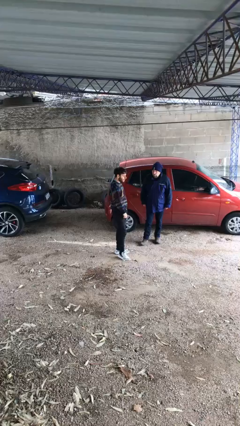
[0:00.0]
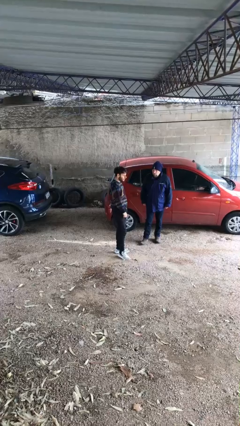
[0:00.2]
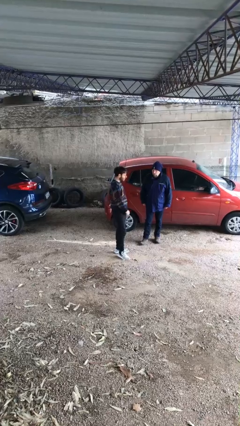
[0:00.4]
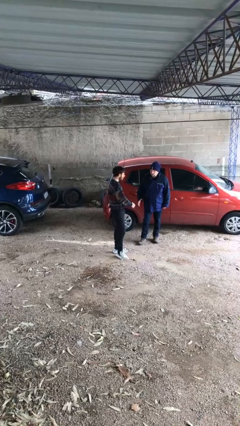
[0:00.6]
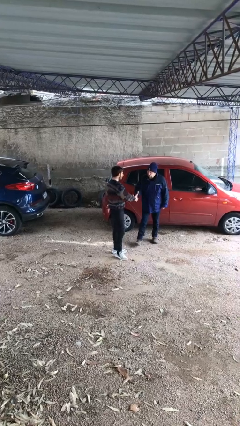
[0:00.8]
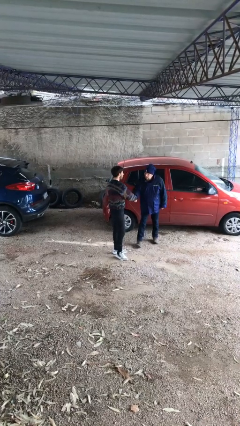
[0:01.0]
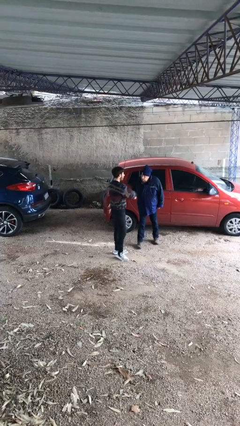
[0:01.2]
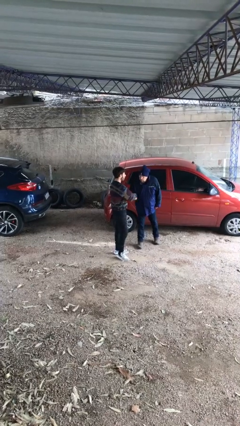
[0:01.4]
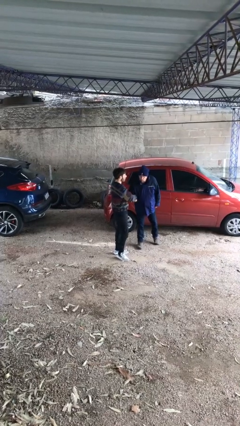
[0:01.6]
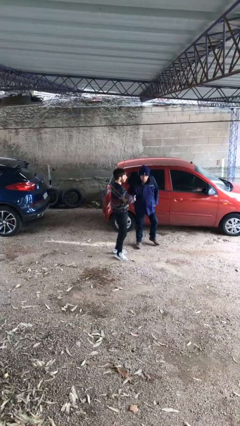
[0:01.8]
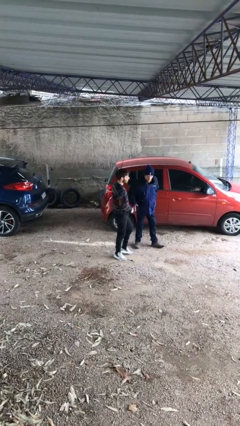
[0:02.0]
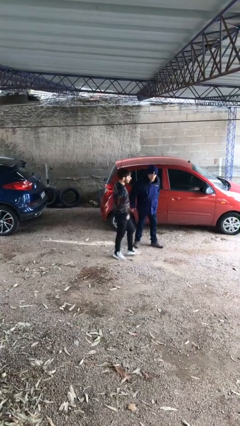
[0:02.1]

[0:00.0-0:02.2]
person shakes hand

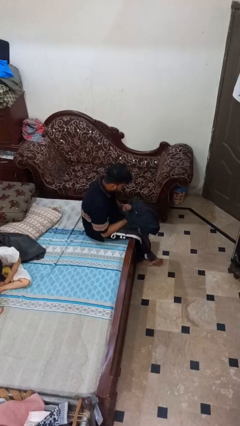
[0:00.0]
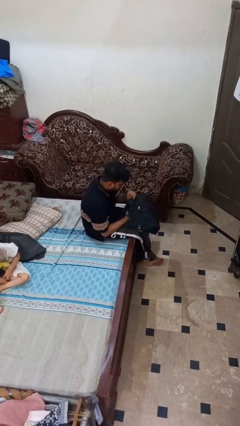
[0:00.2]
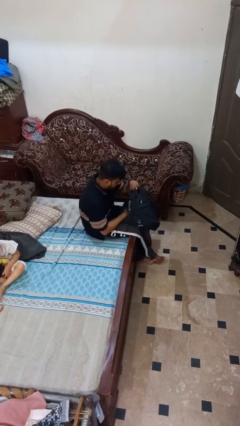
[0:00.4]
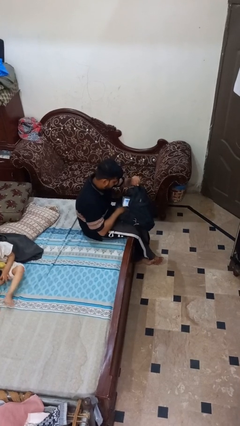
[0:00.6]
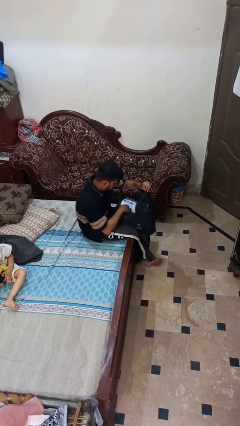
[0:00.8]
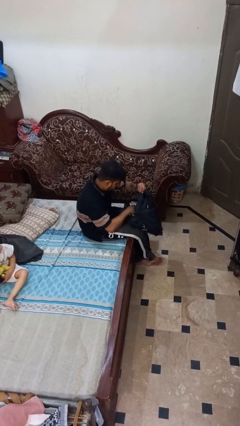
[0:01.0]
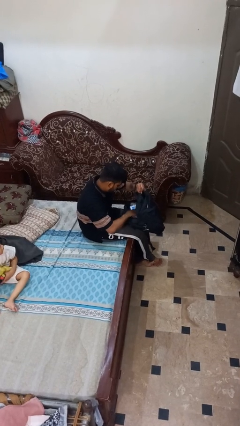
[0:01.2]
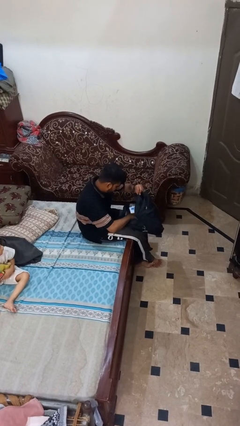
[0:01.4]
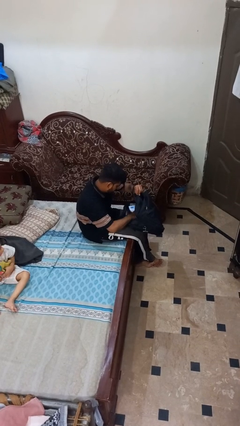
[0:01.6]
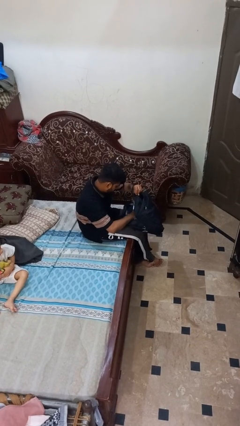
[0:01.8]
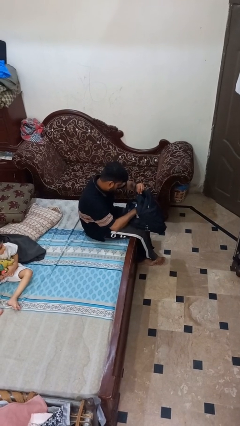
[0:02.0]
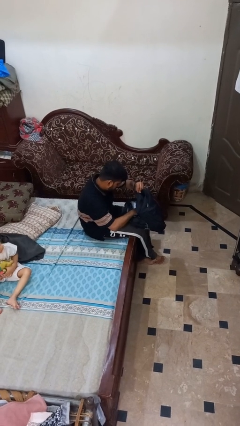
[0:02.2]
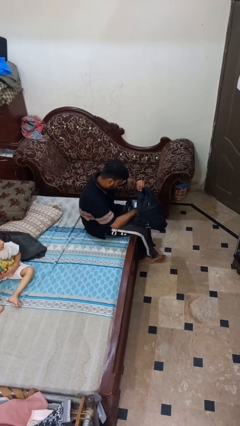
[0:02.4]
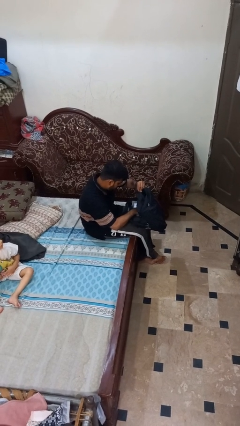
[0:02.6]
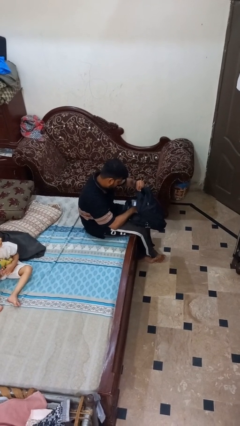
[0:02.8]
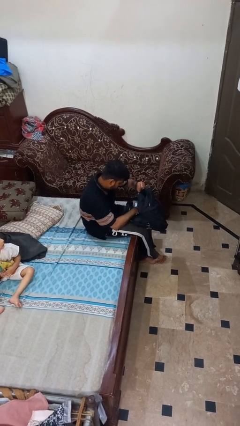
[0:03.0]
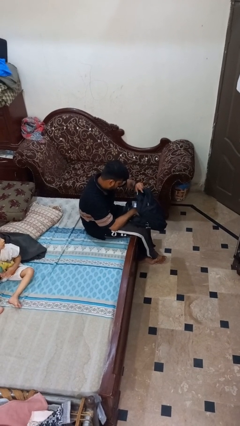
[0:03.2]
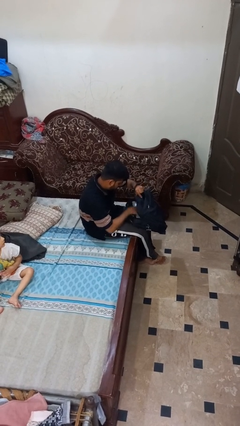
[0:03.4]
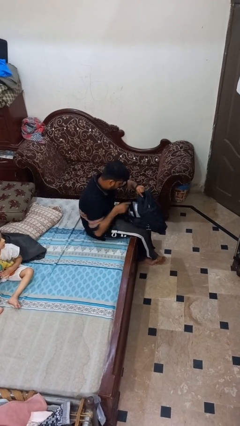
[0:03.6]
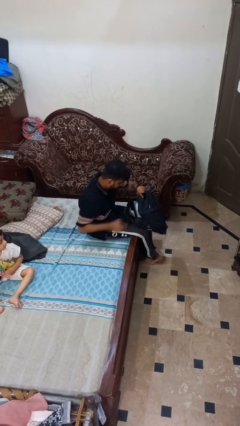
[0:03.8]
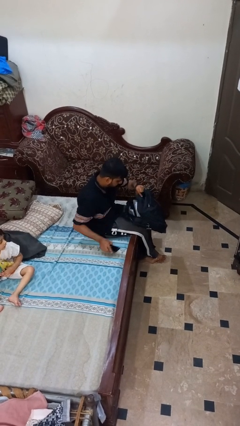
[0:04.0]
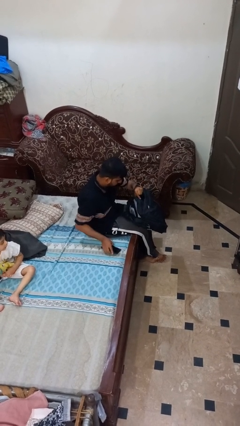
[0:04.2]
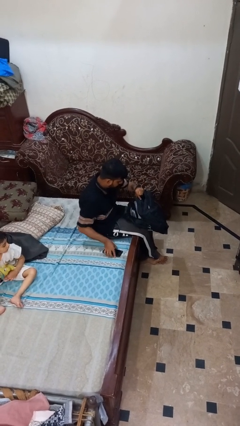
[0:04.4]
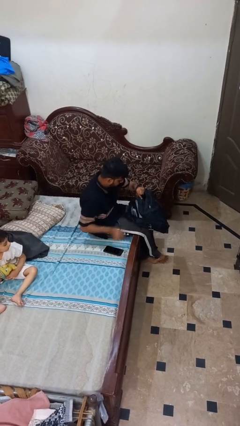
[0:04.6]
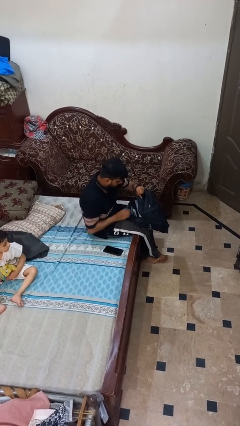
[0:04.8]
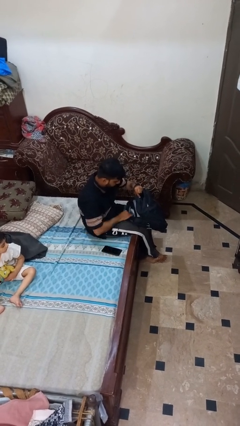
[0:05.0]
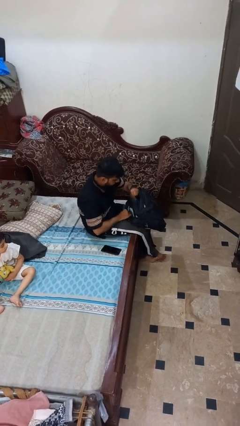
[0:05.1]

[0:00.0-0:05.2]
person searches in bag

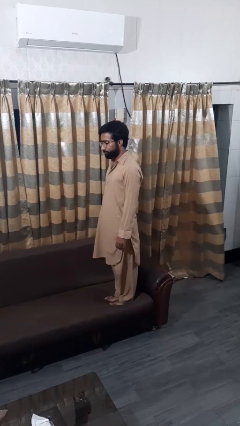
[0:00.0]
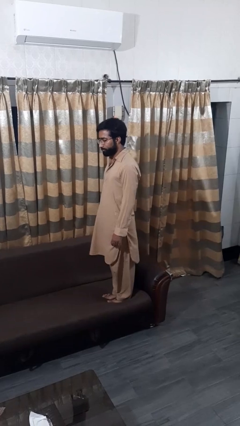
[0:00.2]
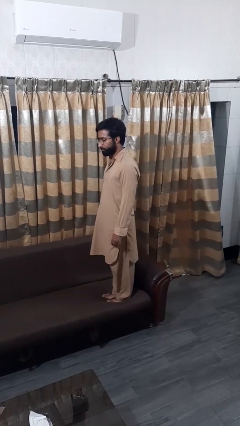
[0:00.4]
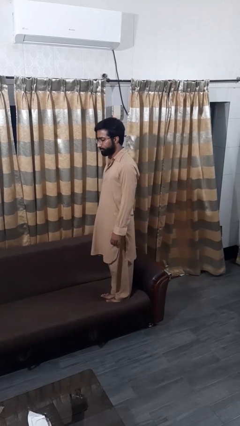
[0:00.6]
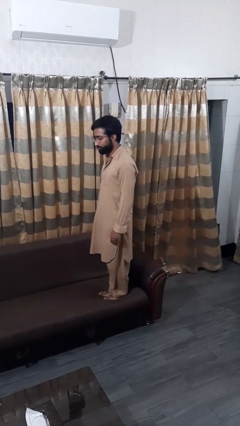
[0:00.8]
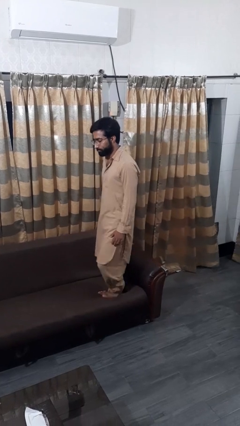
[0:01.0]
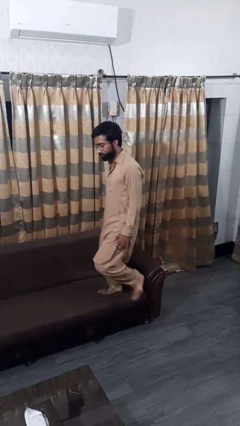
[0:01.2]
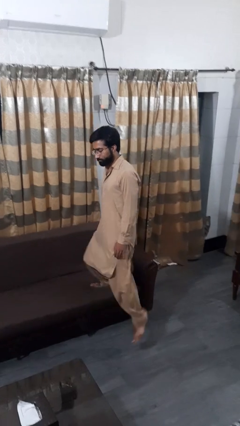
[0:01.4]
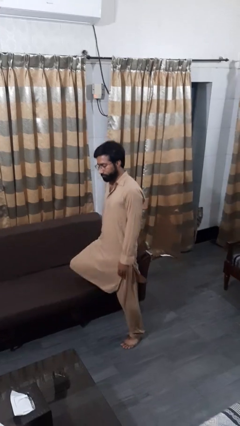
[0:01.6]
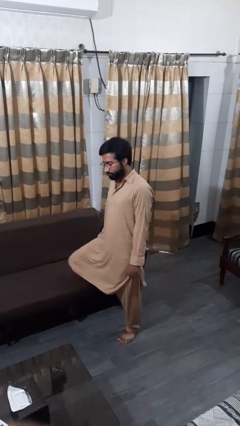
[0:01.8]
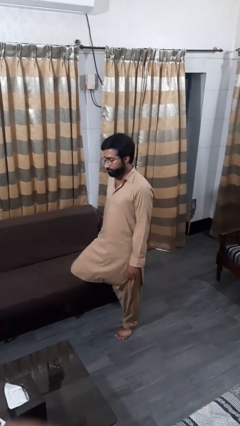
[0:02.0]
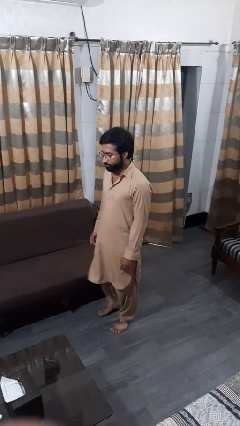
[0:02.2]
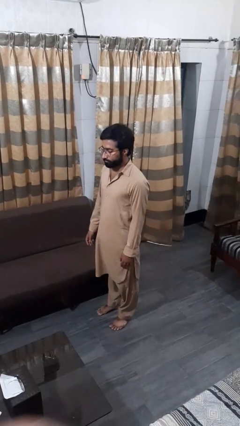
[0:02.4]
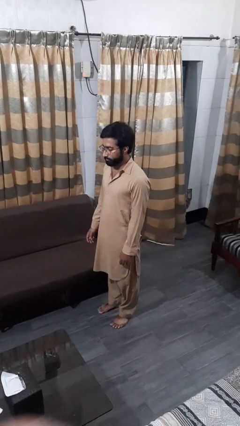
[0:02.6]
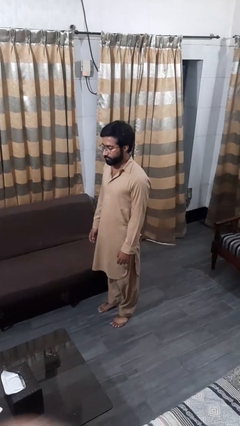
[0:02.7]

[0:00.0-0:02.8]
person climbs off couch

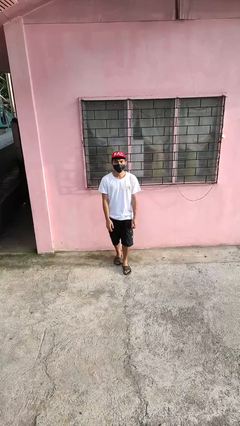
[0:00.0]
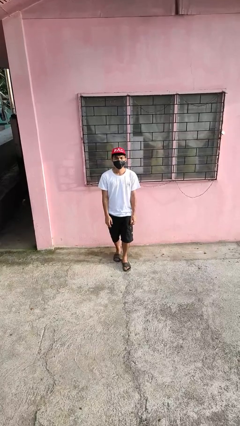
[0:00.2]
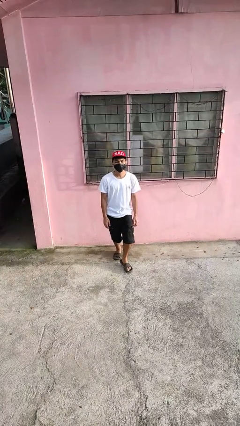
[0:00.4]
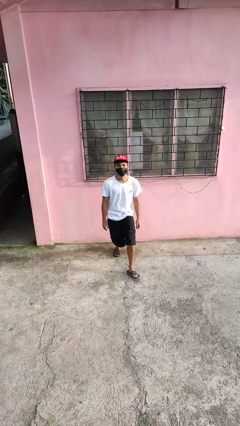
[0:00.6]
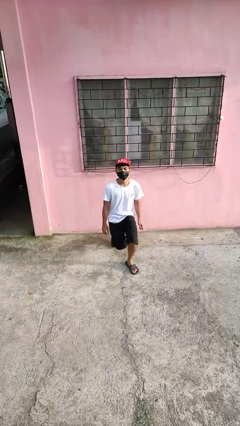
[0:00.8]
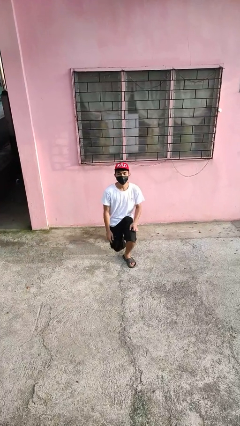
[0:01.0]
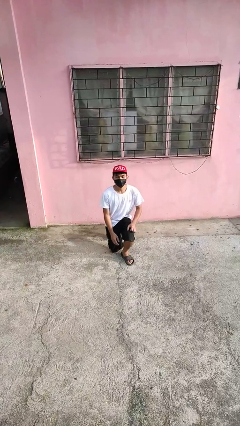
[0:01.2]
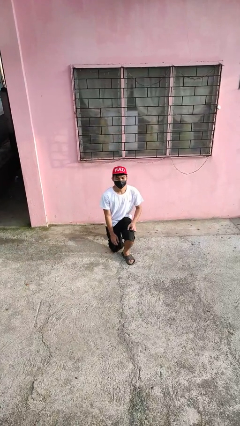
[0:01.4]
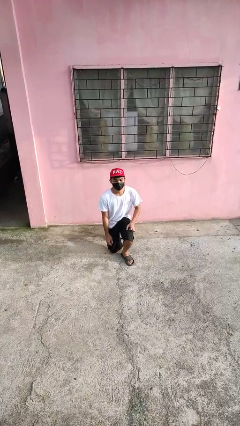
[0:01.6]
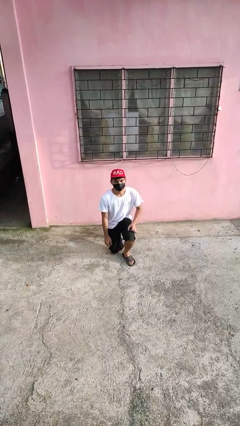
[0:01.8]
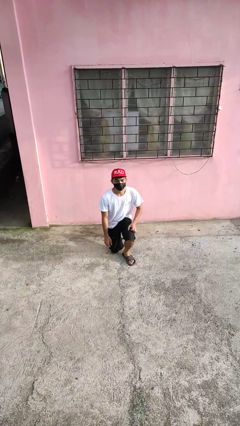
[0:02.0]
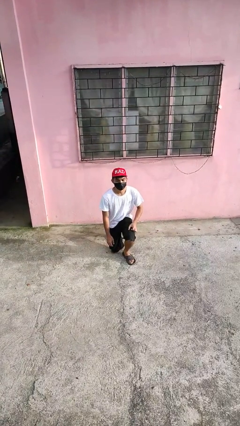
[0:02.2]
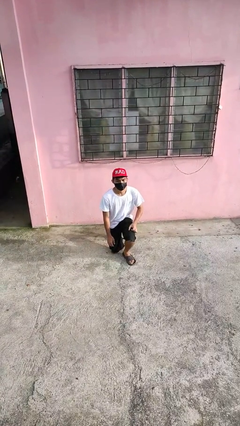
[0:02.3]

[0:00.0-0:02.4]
person kneels

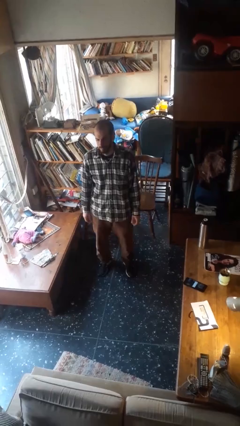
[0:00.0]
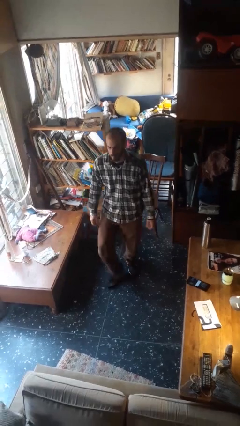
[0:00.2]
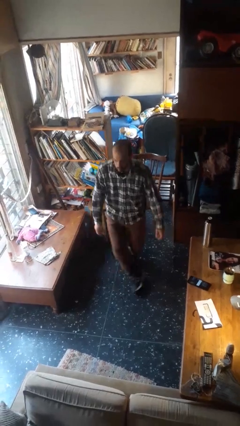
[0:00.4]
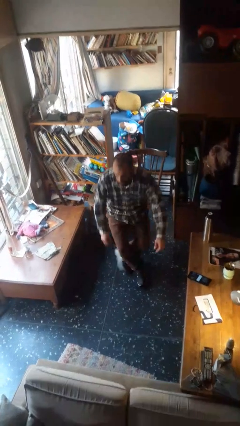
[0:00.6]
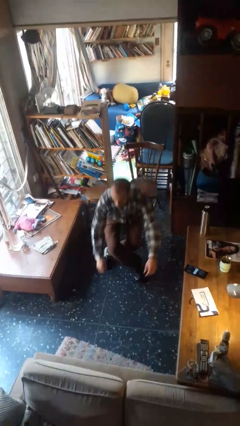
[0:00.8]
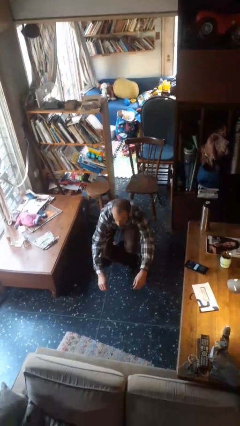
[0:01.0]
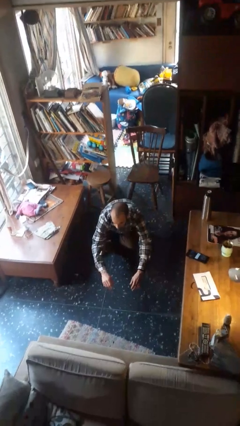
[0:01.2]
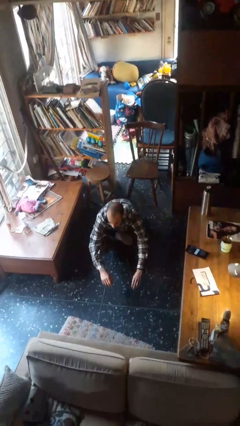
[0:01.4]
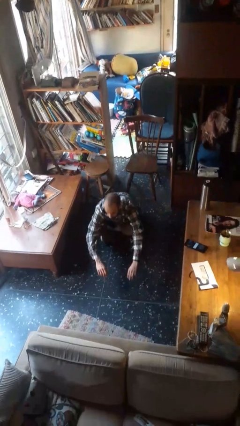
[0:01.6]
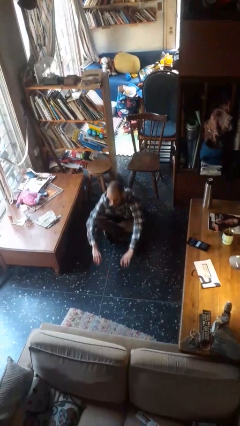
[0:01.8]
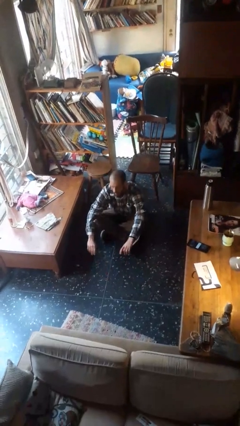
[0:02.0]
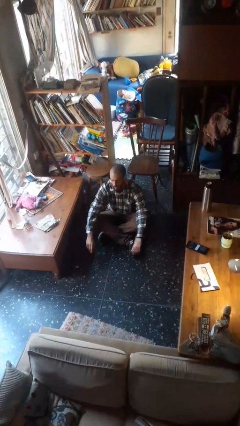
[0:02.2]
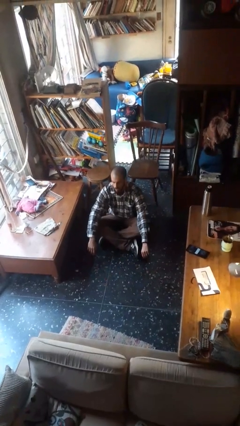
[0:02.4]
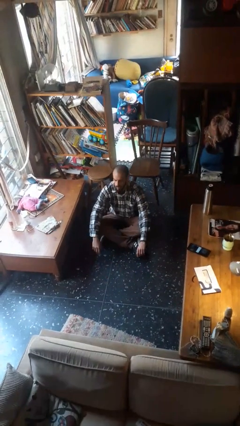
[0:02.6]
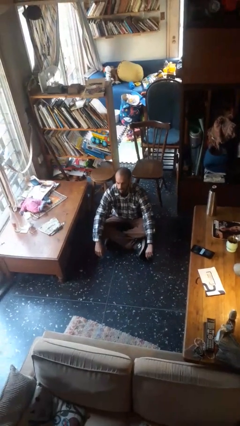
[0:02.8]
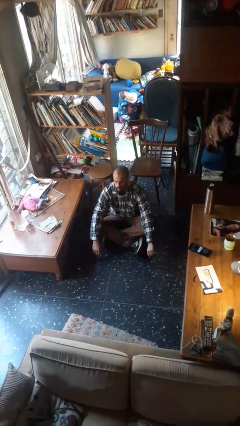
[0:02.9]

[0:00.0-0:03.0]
person sits crisscross

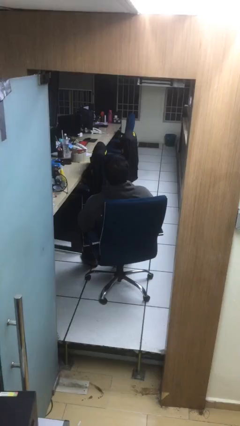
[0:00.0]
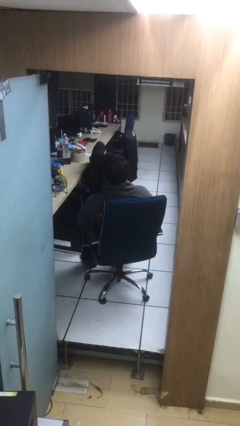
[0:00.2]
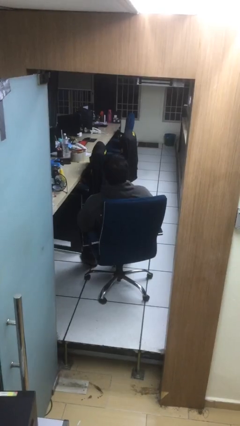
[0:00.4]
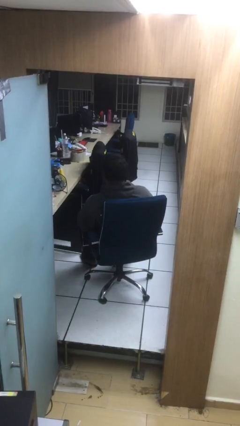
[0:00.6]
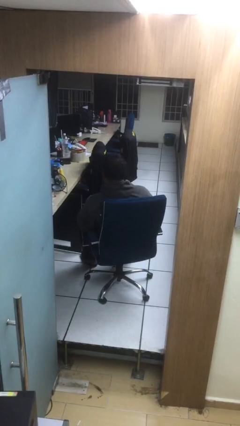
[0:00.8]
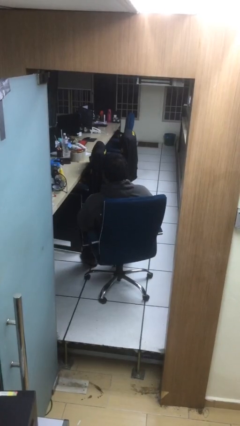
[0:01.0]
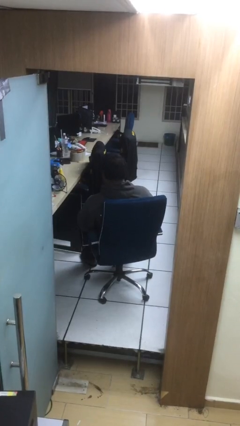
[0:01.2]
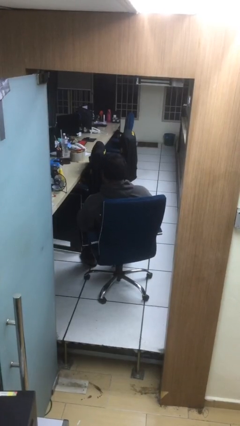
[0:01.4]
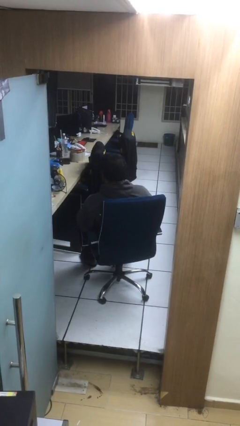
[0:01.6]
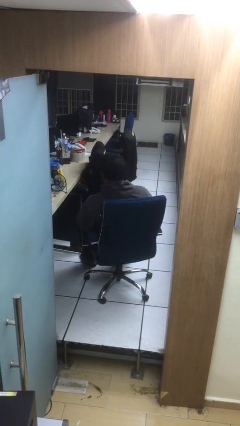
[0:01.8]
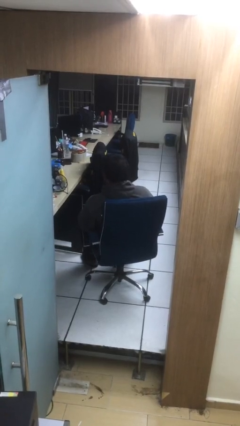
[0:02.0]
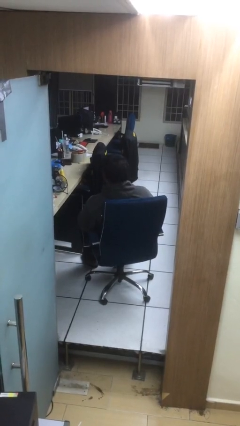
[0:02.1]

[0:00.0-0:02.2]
person nods head
